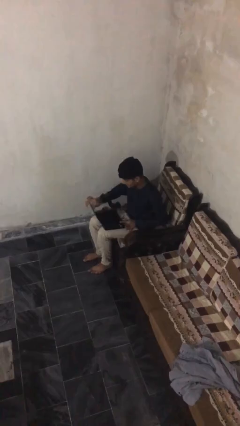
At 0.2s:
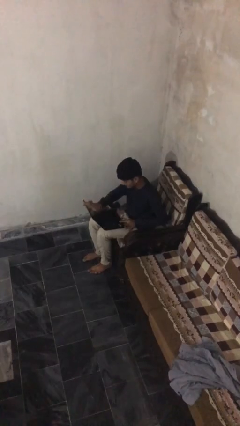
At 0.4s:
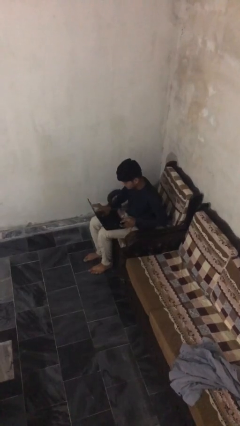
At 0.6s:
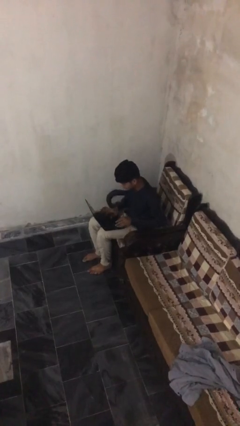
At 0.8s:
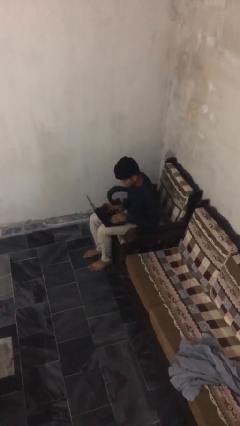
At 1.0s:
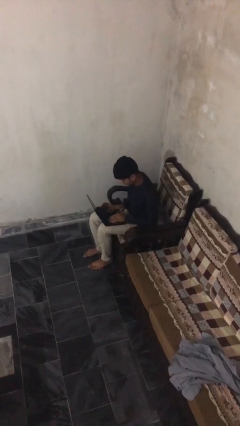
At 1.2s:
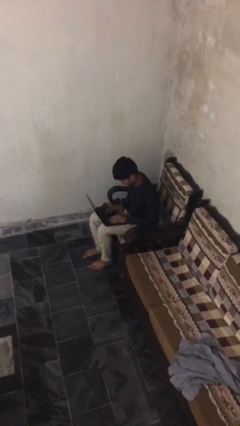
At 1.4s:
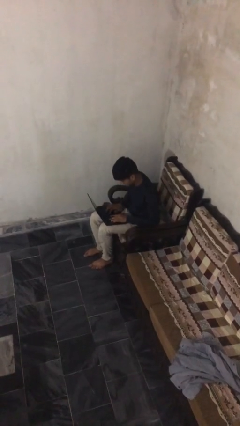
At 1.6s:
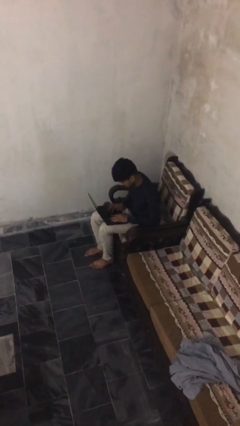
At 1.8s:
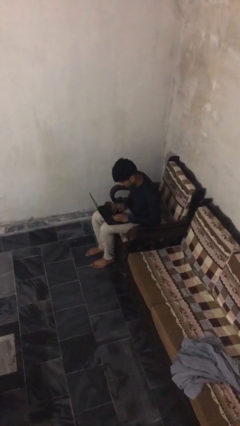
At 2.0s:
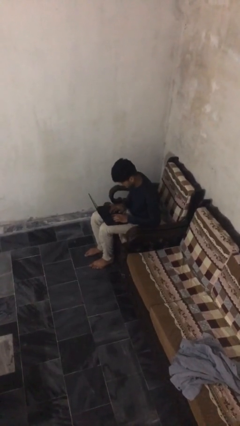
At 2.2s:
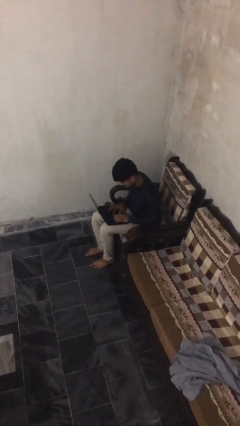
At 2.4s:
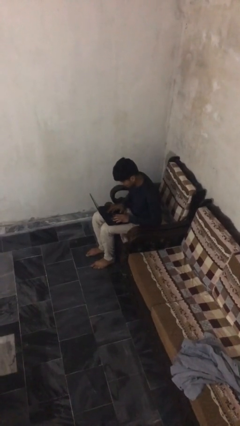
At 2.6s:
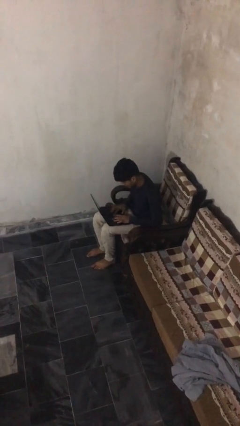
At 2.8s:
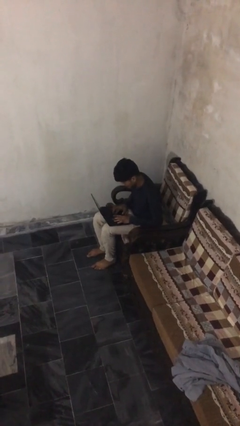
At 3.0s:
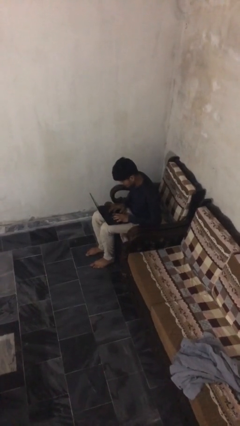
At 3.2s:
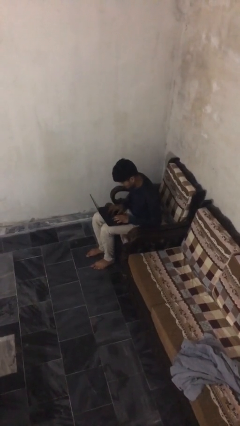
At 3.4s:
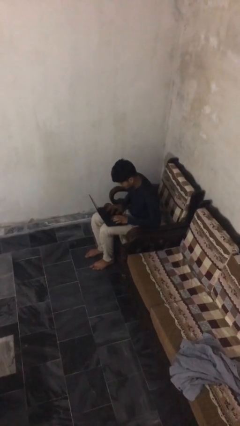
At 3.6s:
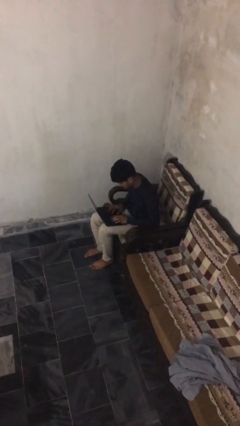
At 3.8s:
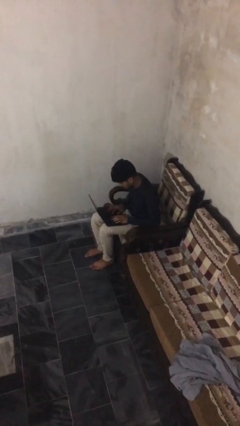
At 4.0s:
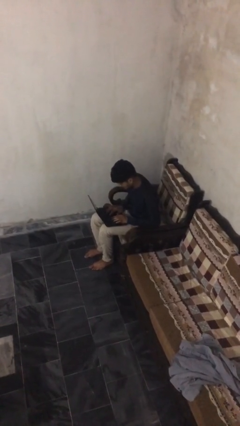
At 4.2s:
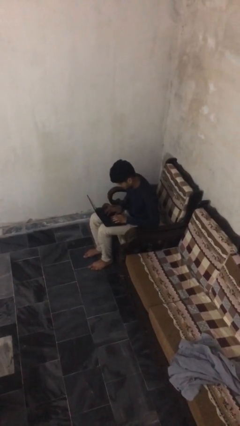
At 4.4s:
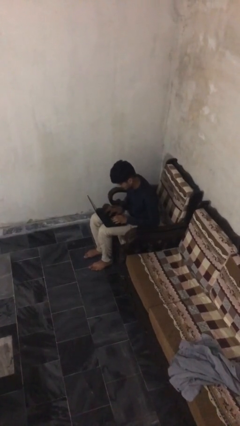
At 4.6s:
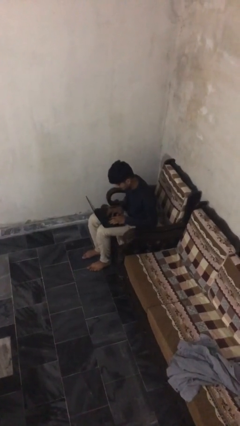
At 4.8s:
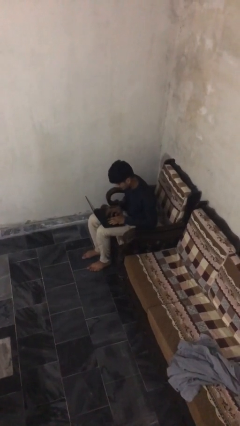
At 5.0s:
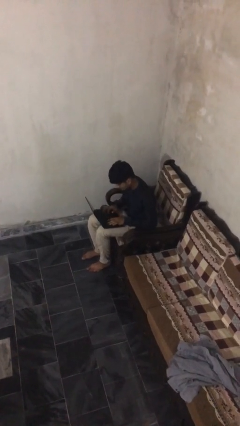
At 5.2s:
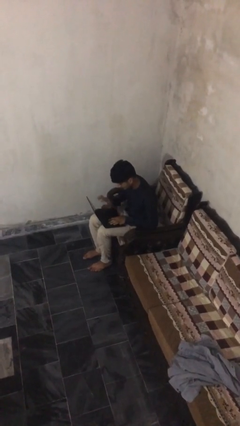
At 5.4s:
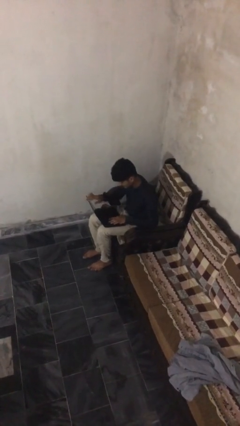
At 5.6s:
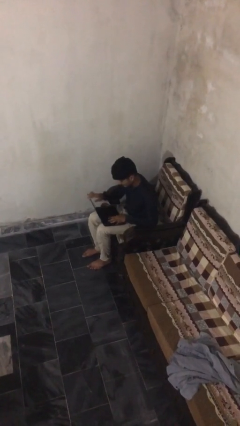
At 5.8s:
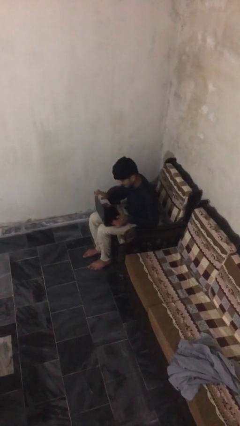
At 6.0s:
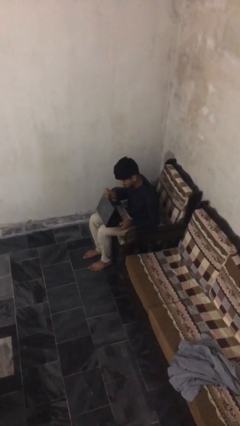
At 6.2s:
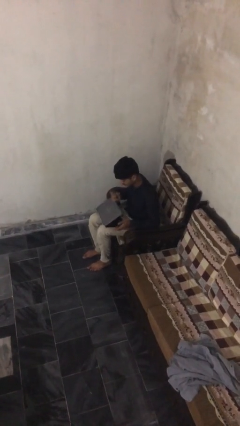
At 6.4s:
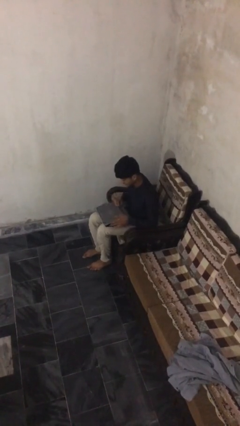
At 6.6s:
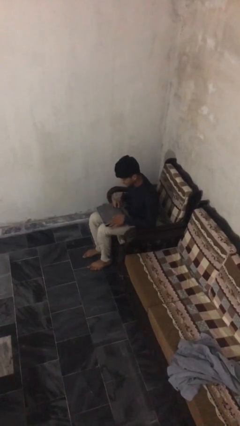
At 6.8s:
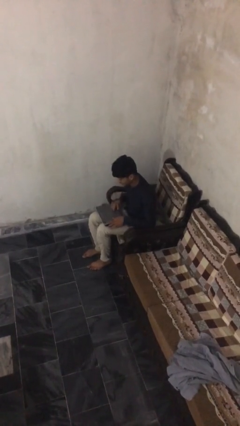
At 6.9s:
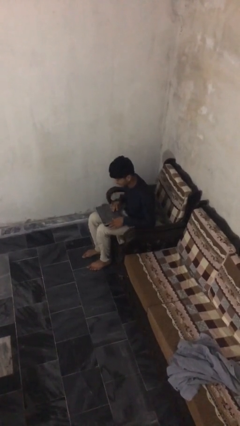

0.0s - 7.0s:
person interacts with laptop

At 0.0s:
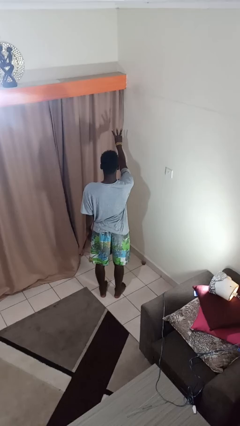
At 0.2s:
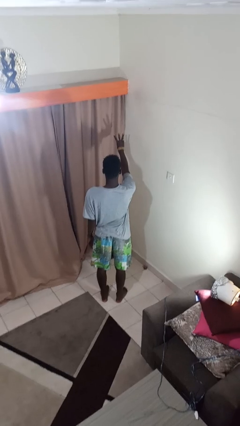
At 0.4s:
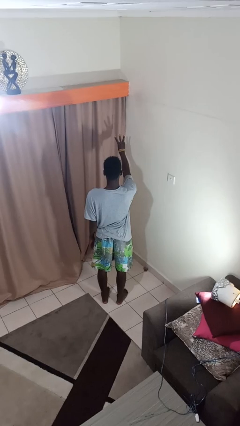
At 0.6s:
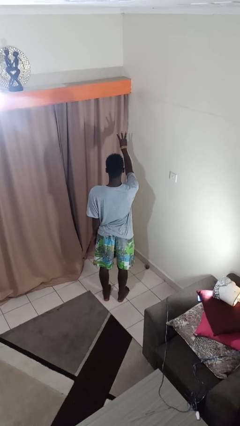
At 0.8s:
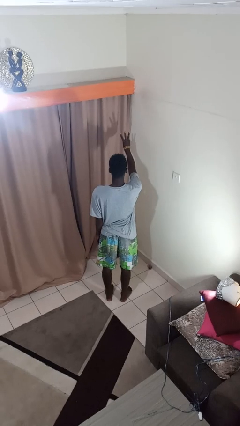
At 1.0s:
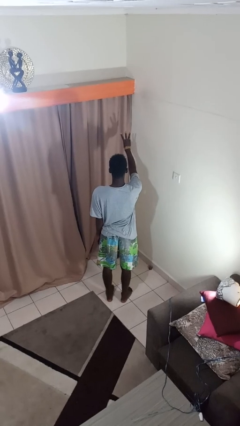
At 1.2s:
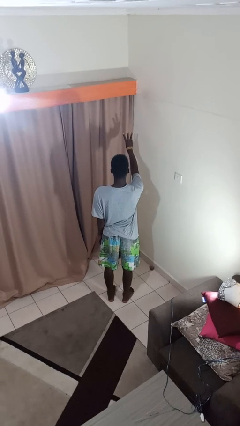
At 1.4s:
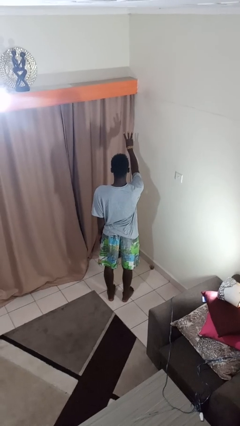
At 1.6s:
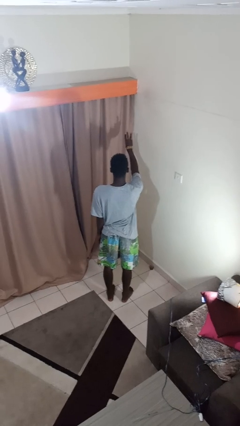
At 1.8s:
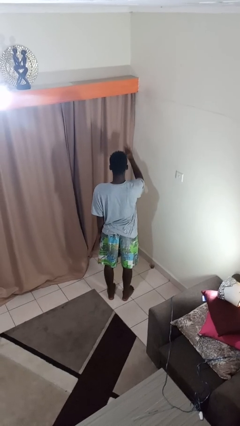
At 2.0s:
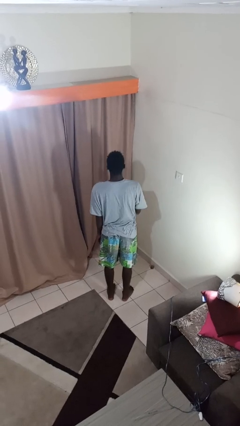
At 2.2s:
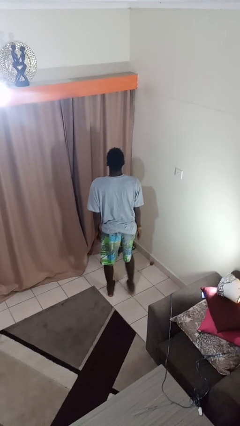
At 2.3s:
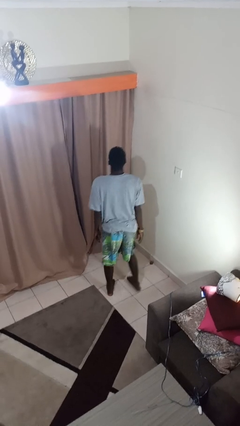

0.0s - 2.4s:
person gestures number three

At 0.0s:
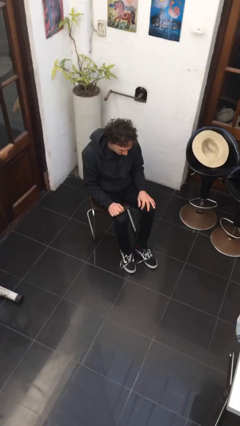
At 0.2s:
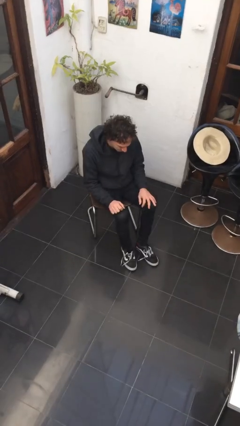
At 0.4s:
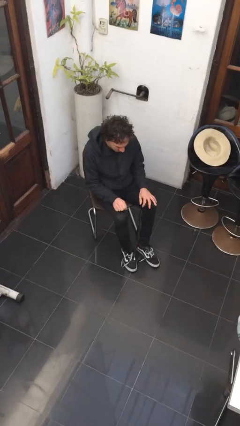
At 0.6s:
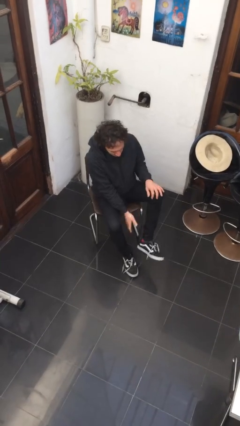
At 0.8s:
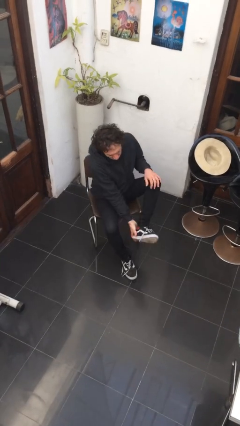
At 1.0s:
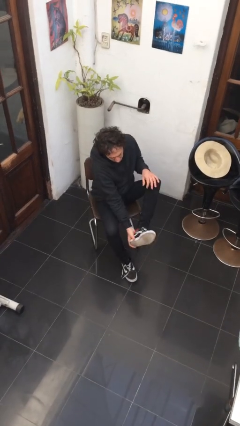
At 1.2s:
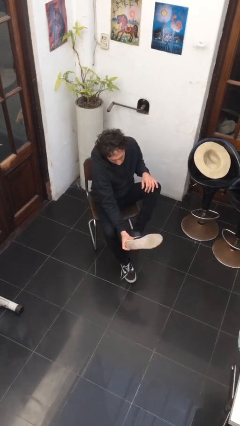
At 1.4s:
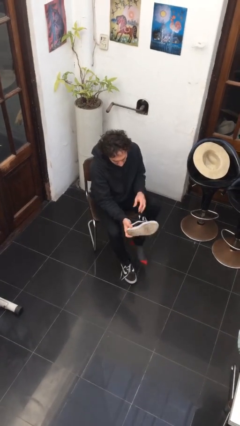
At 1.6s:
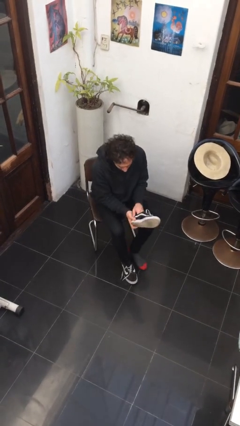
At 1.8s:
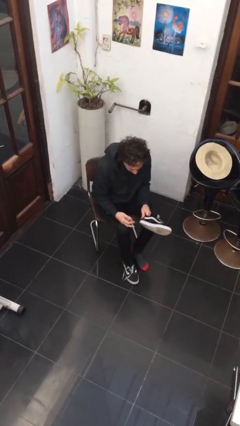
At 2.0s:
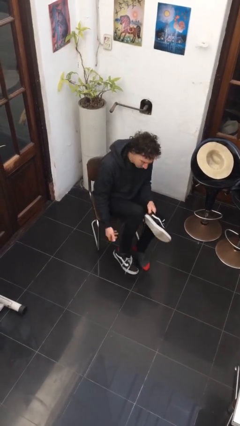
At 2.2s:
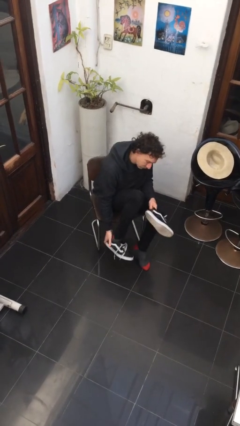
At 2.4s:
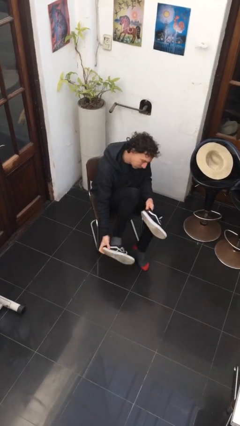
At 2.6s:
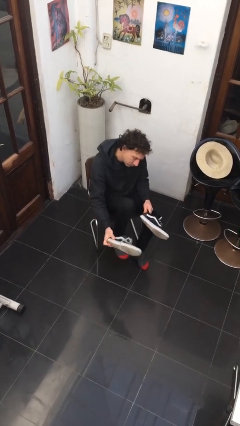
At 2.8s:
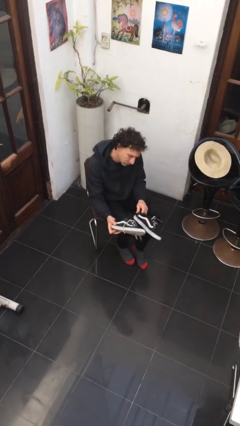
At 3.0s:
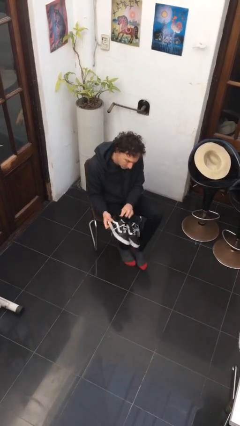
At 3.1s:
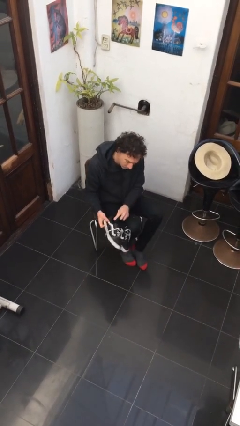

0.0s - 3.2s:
person takes off shoes

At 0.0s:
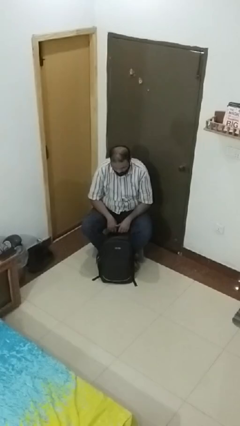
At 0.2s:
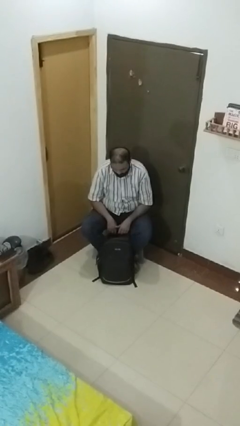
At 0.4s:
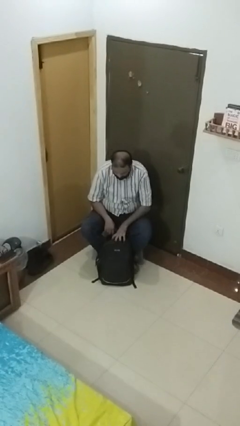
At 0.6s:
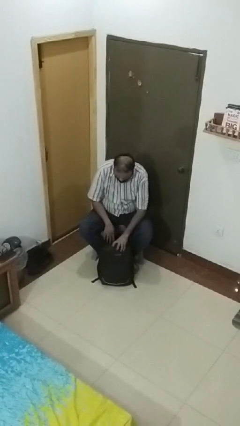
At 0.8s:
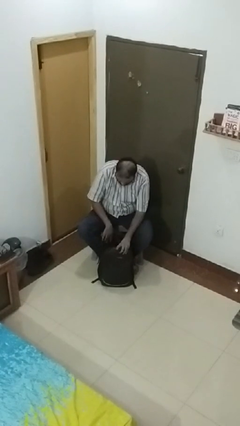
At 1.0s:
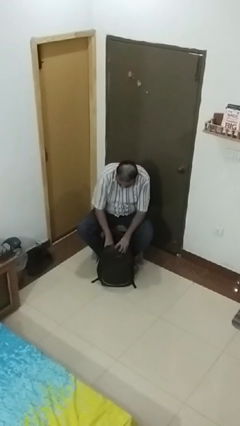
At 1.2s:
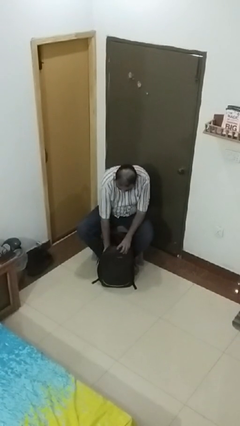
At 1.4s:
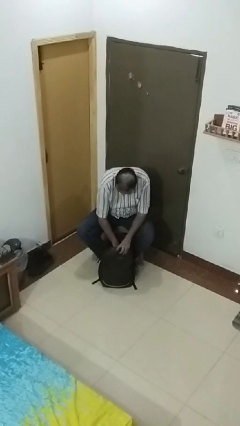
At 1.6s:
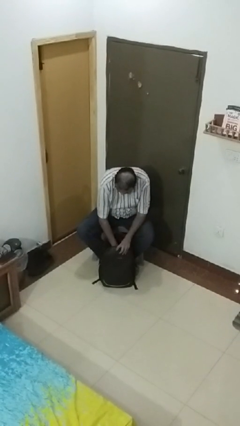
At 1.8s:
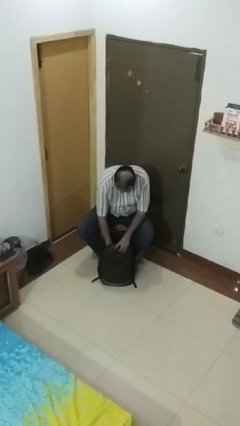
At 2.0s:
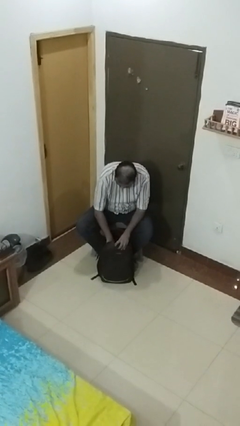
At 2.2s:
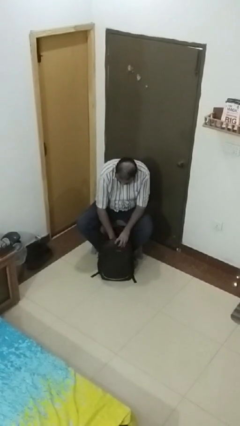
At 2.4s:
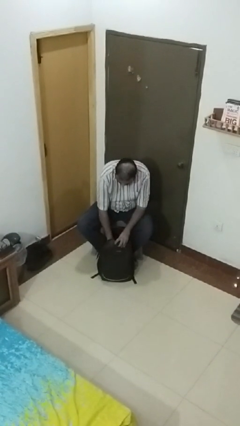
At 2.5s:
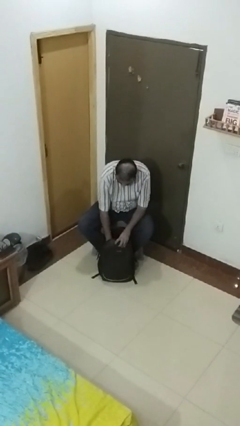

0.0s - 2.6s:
person searches in backpack

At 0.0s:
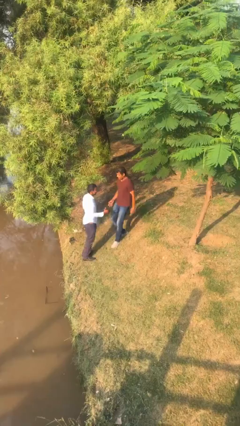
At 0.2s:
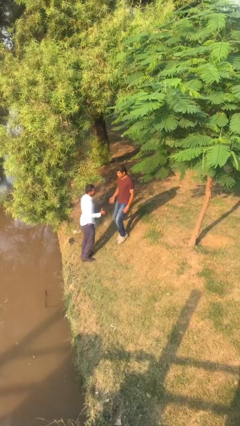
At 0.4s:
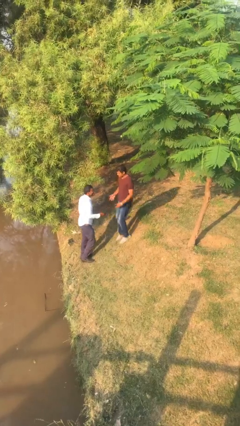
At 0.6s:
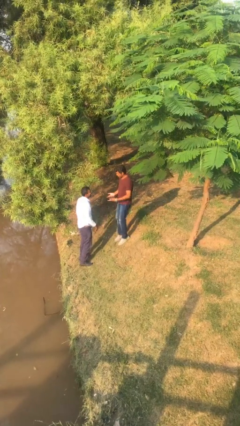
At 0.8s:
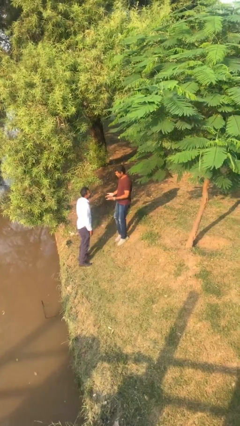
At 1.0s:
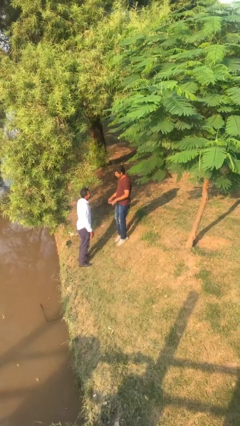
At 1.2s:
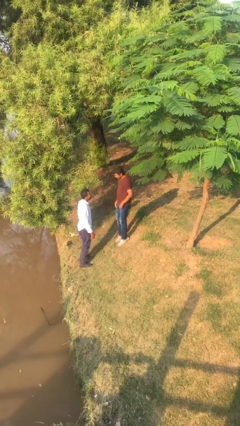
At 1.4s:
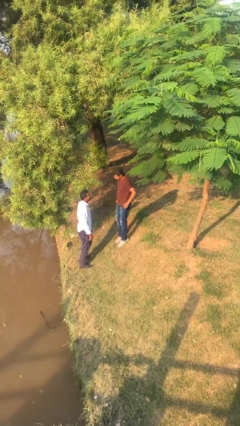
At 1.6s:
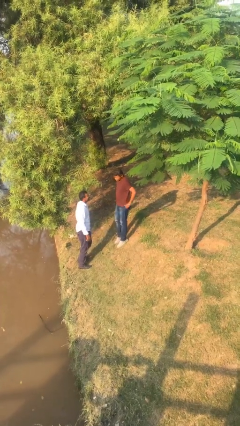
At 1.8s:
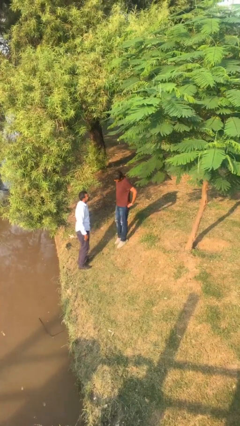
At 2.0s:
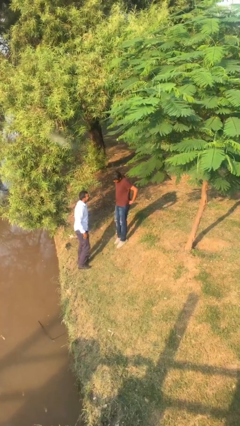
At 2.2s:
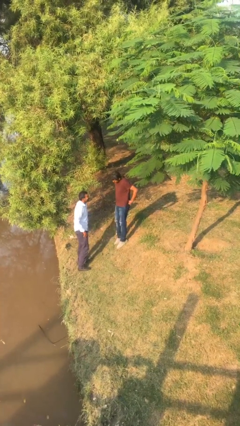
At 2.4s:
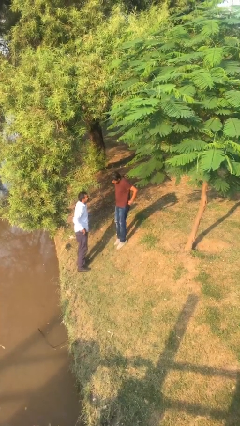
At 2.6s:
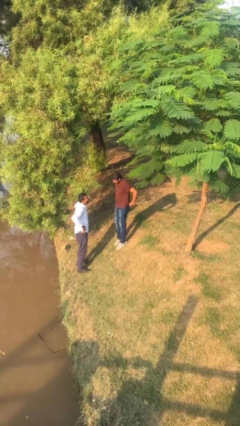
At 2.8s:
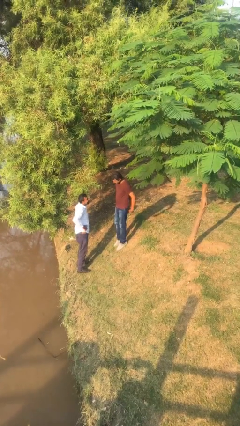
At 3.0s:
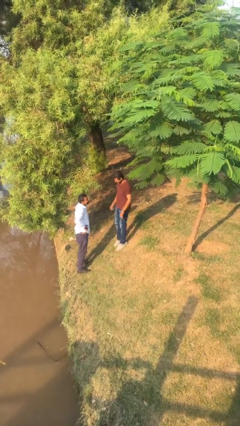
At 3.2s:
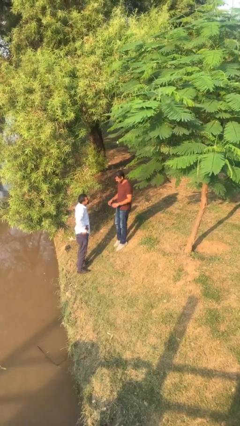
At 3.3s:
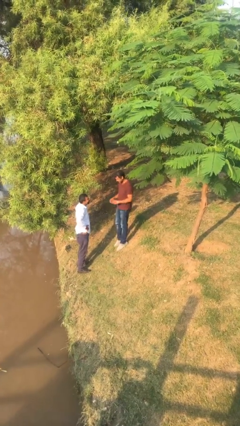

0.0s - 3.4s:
person talks to person
